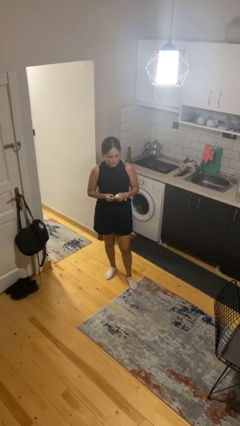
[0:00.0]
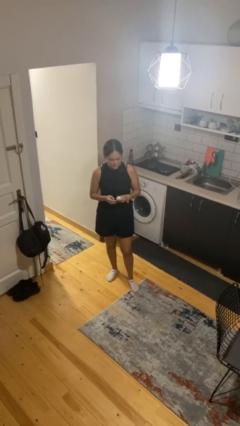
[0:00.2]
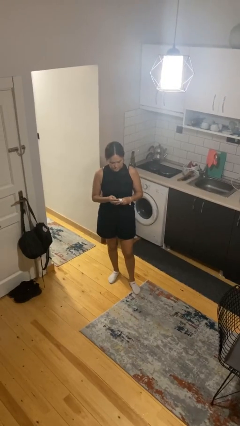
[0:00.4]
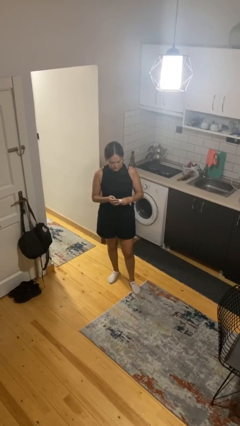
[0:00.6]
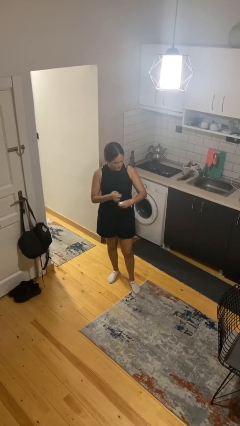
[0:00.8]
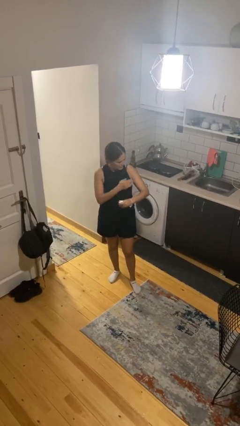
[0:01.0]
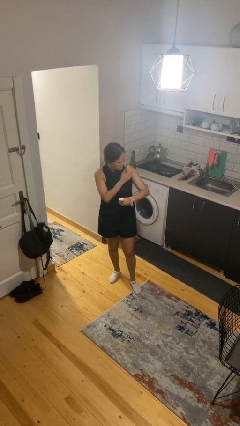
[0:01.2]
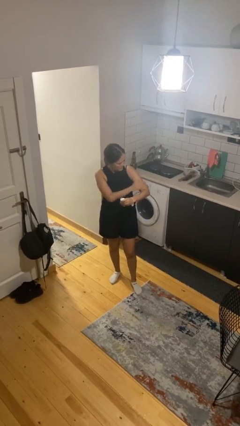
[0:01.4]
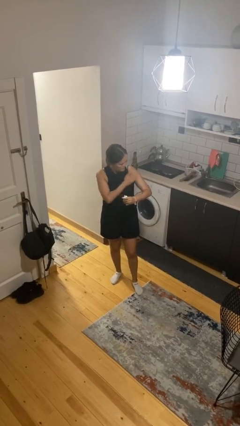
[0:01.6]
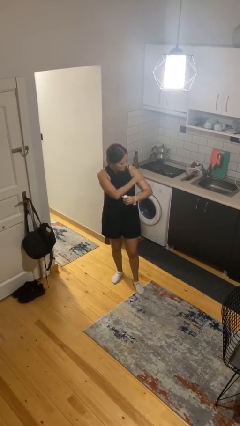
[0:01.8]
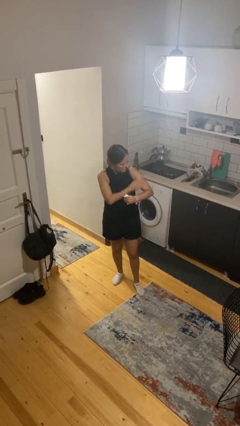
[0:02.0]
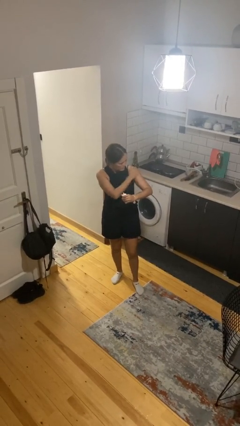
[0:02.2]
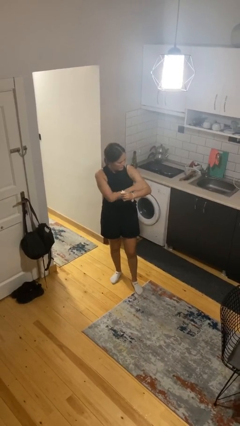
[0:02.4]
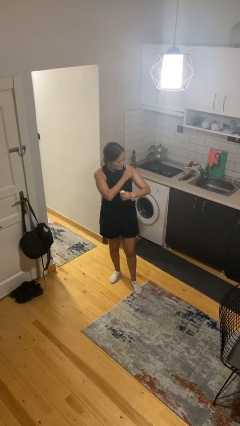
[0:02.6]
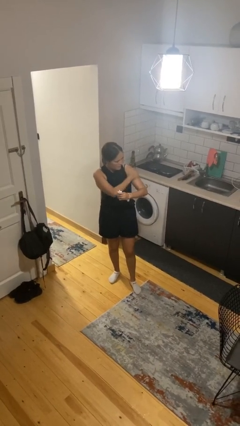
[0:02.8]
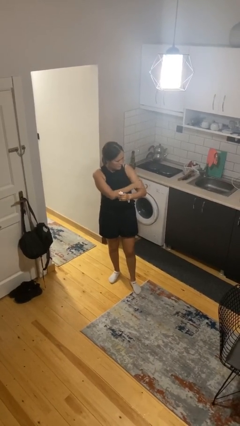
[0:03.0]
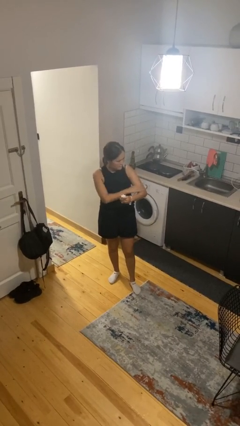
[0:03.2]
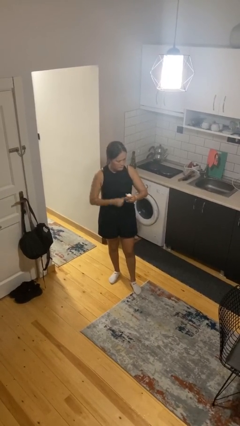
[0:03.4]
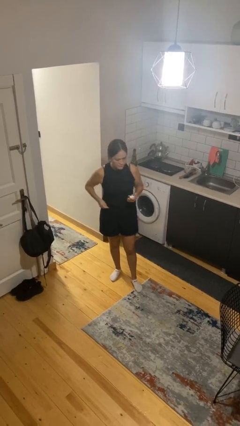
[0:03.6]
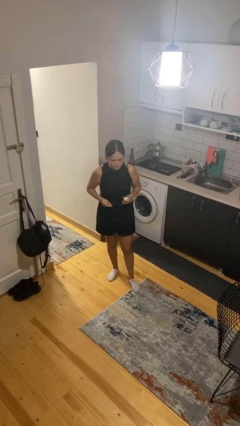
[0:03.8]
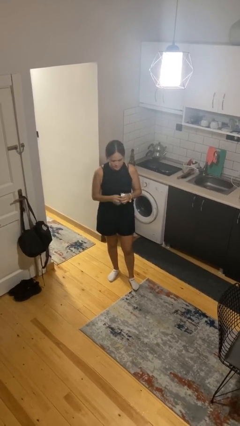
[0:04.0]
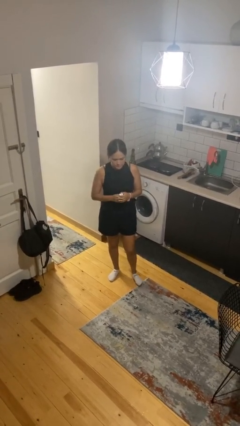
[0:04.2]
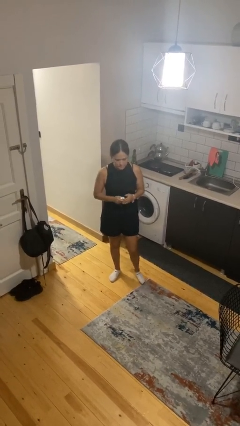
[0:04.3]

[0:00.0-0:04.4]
person applies sunscreen

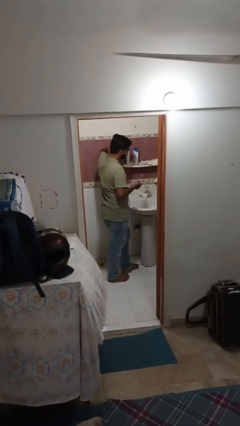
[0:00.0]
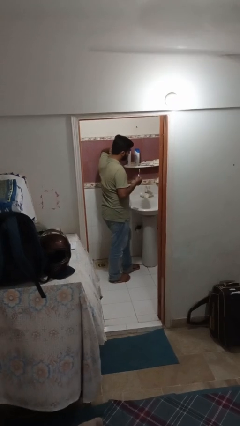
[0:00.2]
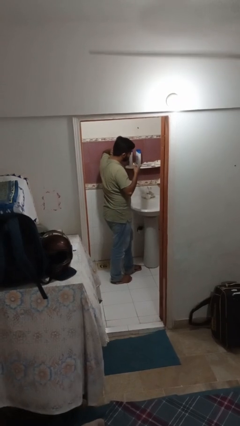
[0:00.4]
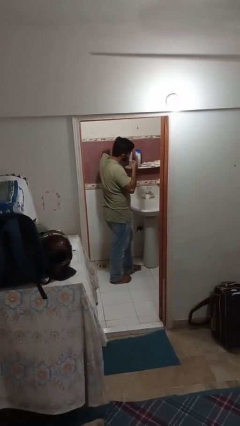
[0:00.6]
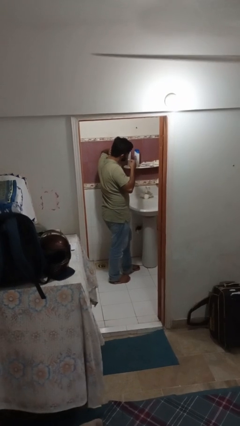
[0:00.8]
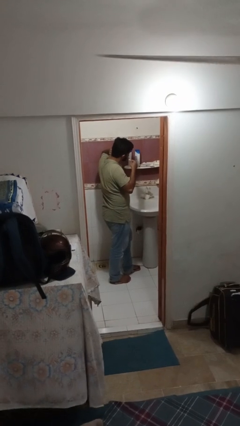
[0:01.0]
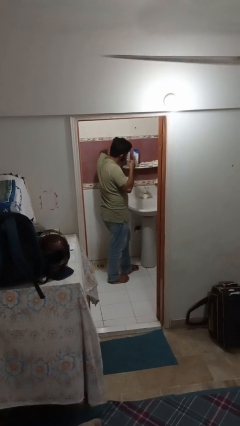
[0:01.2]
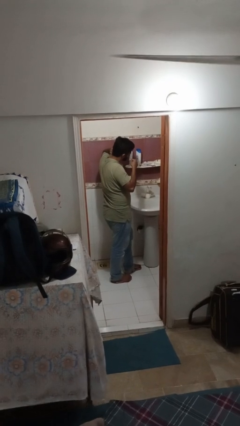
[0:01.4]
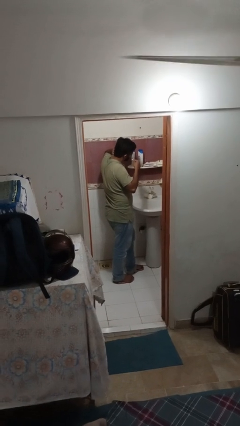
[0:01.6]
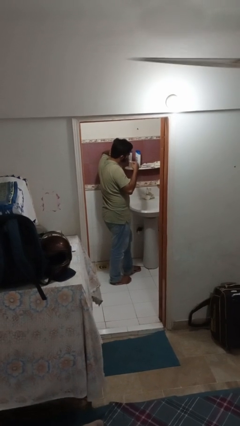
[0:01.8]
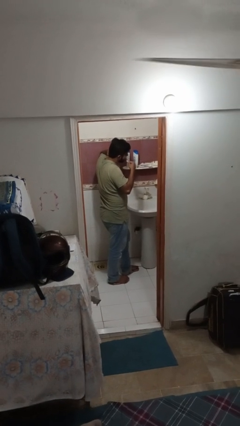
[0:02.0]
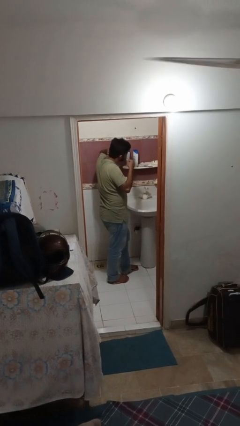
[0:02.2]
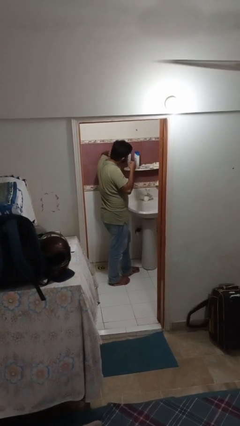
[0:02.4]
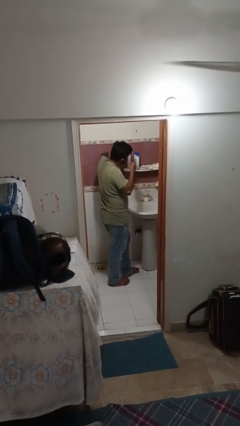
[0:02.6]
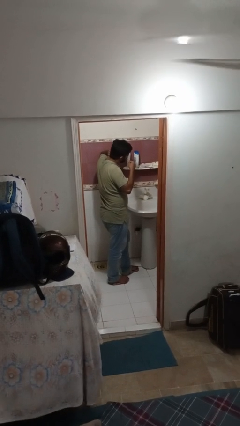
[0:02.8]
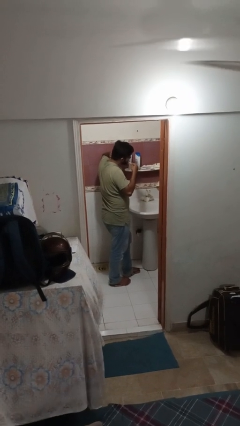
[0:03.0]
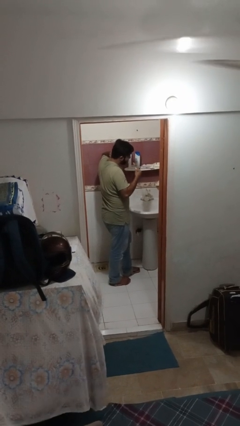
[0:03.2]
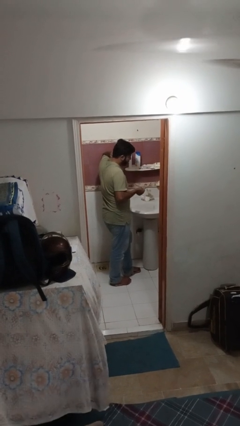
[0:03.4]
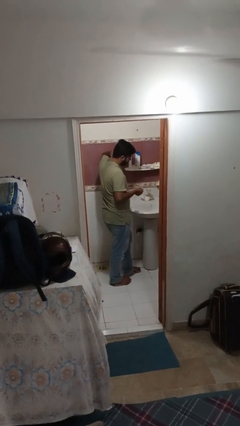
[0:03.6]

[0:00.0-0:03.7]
person brushes teeth

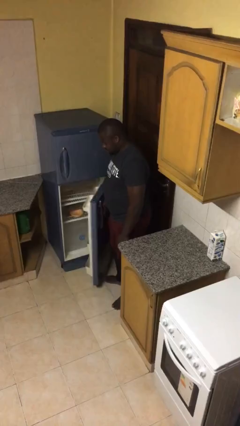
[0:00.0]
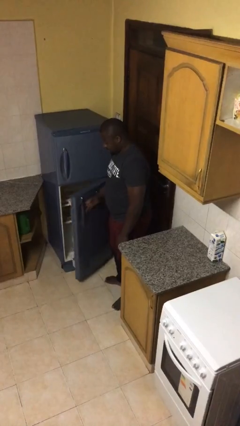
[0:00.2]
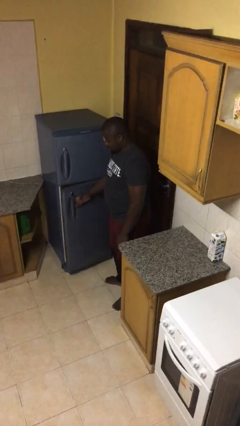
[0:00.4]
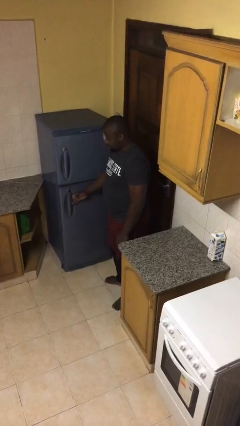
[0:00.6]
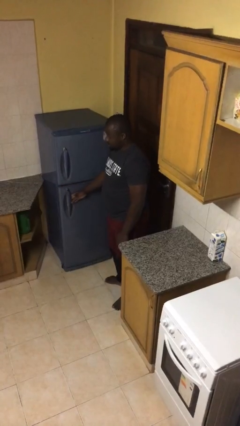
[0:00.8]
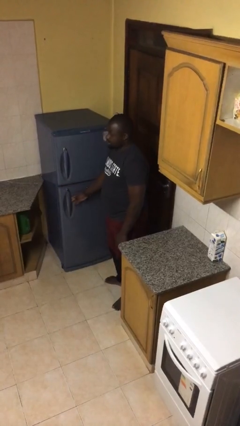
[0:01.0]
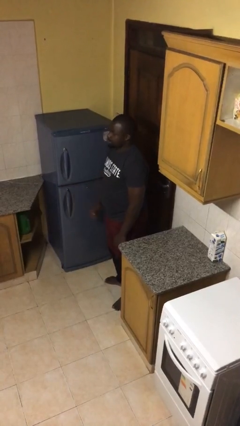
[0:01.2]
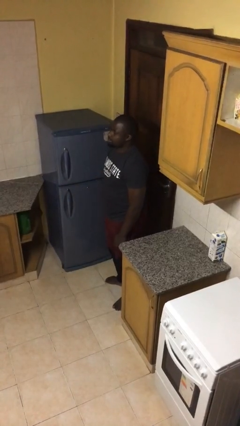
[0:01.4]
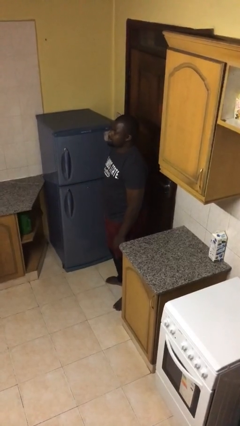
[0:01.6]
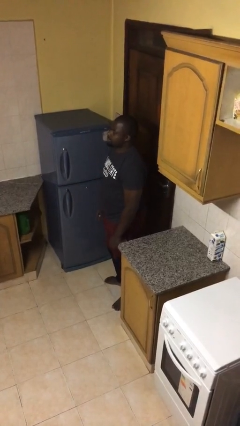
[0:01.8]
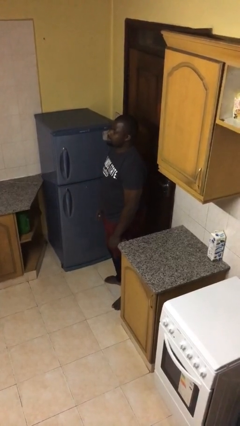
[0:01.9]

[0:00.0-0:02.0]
person closes refrigerator

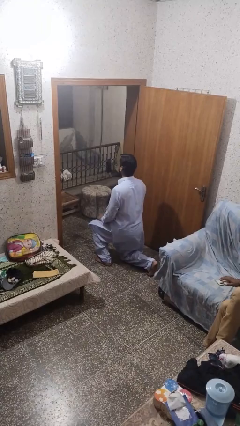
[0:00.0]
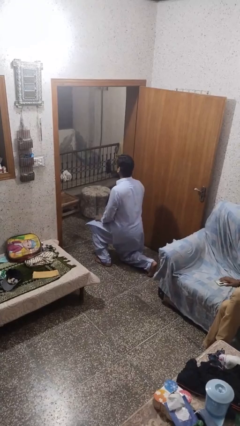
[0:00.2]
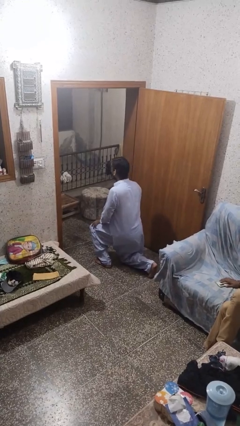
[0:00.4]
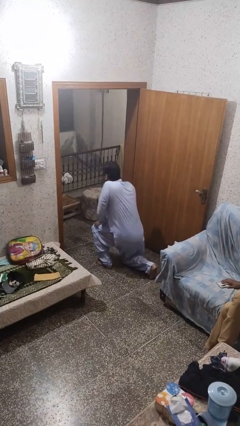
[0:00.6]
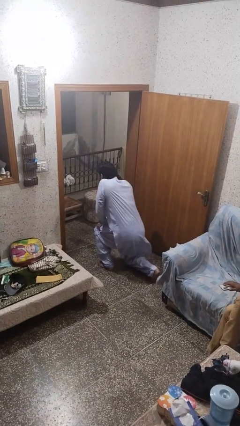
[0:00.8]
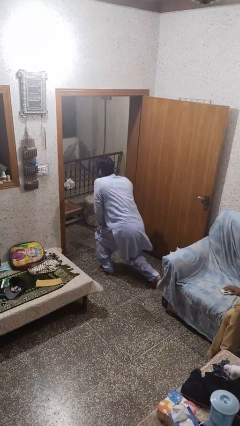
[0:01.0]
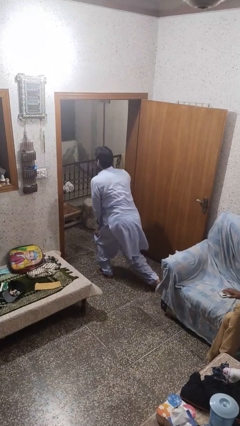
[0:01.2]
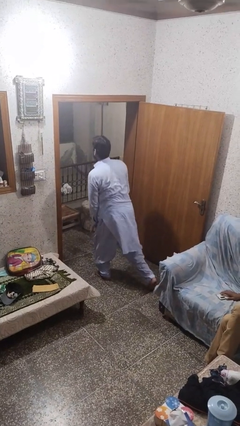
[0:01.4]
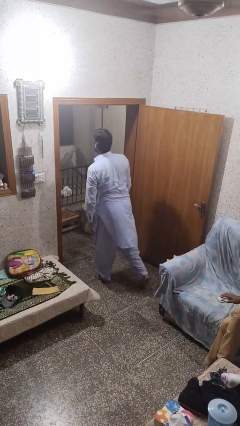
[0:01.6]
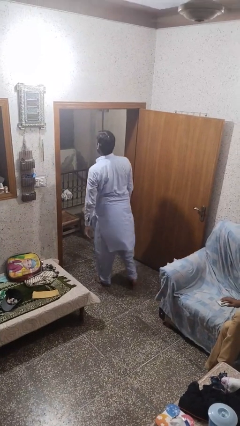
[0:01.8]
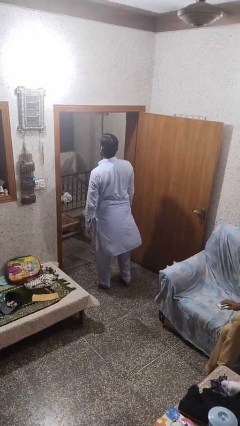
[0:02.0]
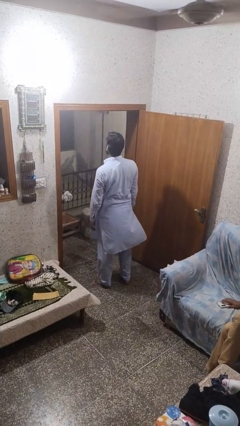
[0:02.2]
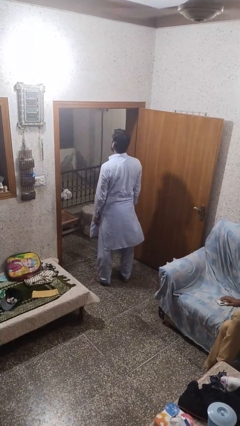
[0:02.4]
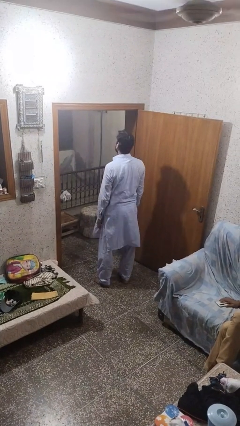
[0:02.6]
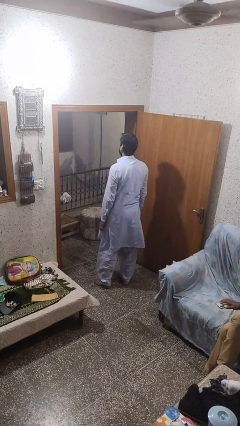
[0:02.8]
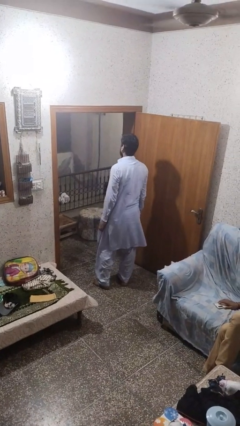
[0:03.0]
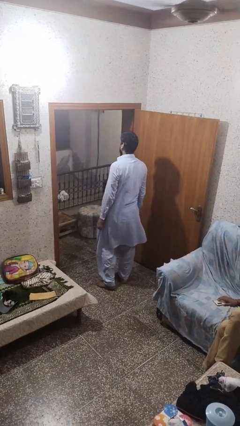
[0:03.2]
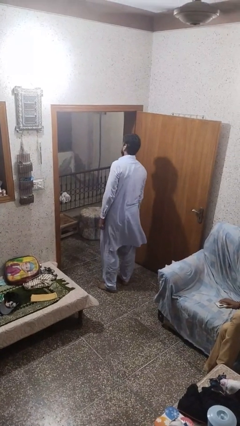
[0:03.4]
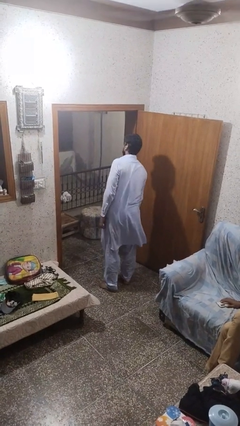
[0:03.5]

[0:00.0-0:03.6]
person stands up from floor

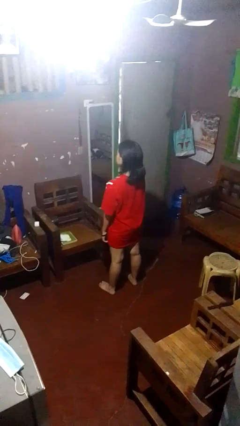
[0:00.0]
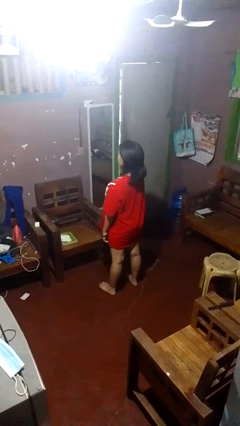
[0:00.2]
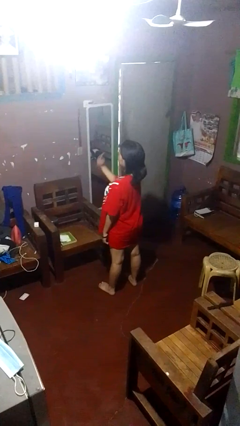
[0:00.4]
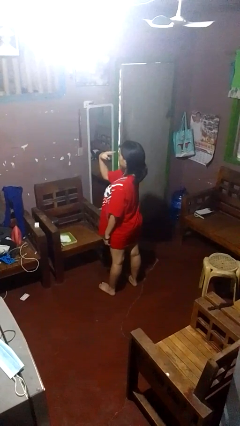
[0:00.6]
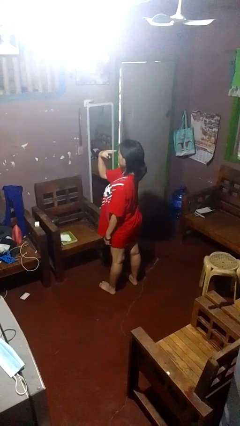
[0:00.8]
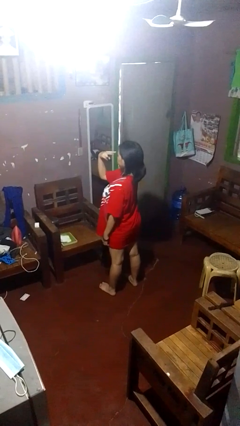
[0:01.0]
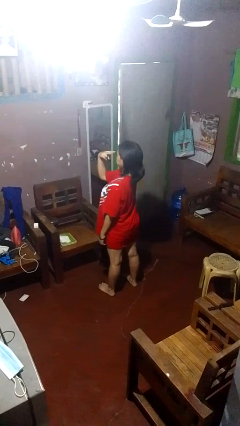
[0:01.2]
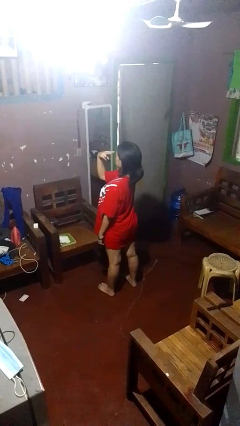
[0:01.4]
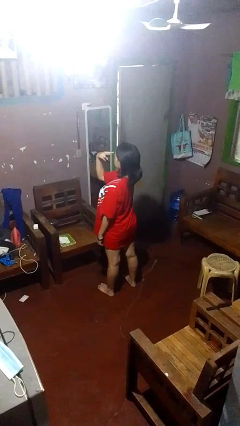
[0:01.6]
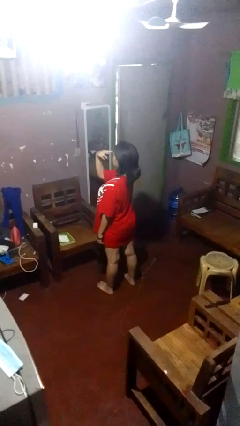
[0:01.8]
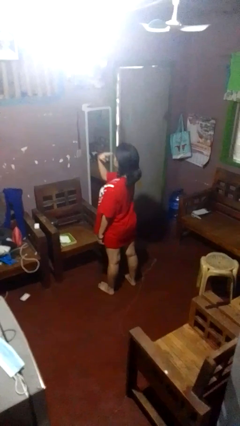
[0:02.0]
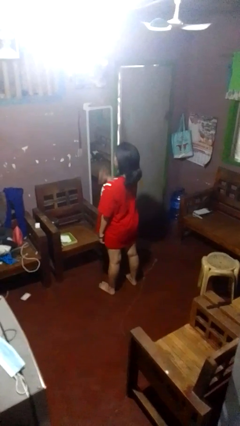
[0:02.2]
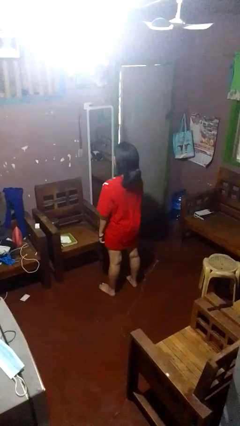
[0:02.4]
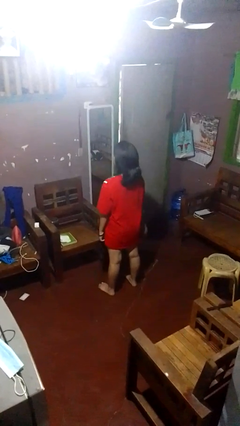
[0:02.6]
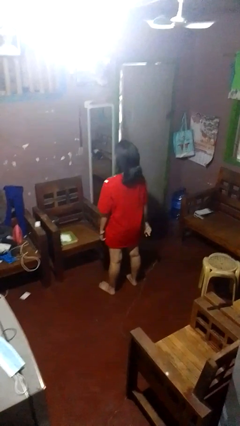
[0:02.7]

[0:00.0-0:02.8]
person gestures watch closely

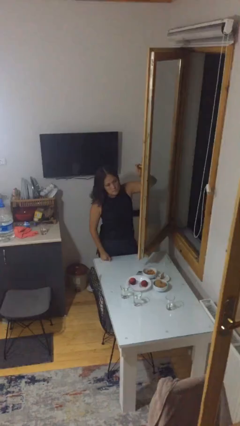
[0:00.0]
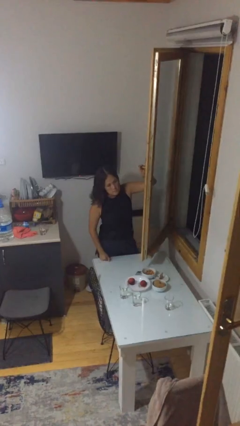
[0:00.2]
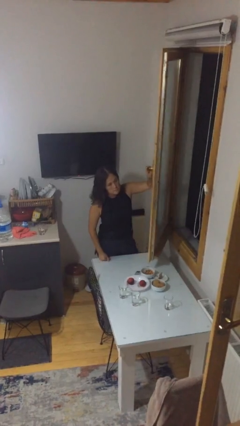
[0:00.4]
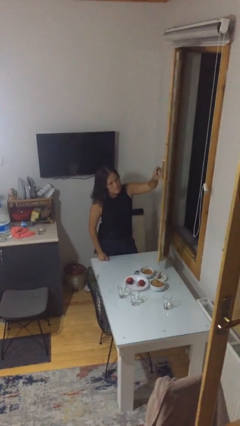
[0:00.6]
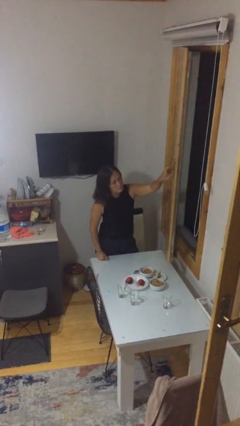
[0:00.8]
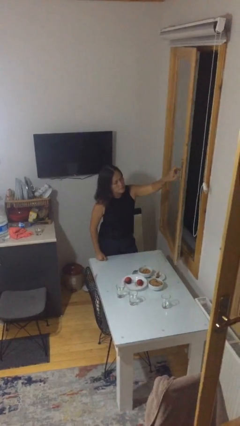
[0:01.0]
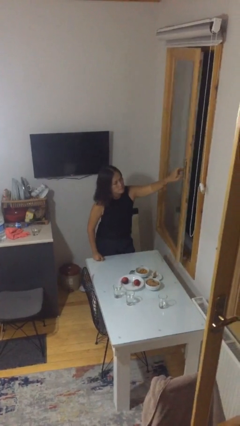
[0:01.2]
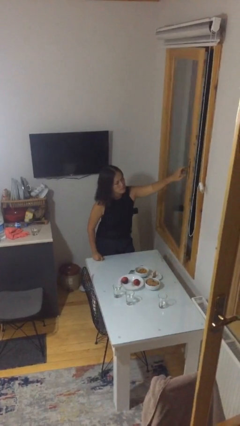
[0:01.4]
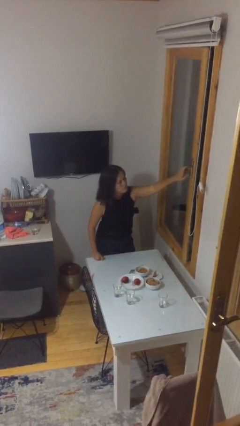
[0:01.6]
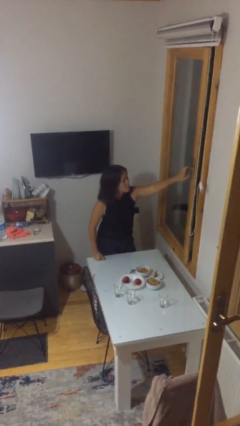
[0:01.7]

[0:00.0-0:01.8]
person closes home window
